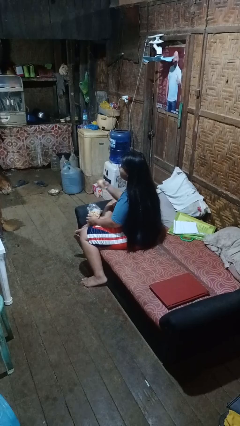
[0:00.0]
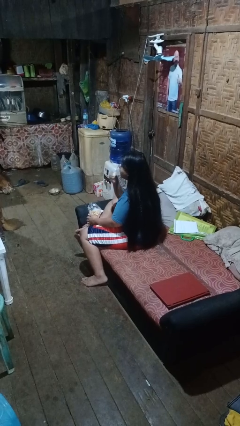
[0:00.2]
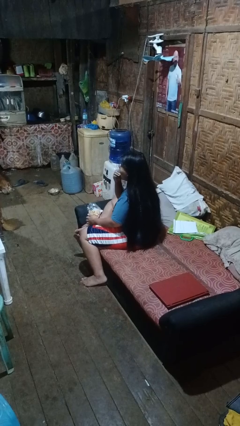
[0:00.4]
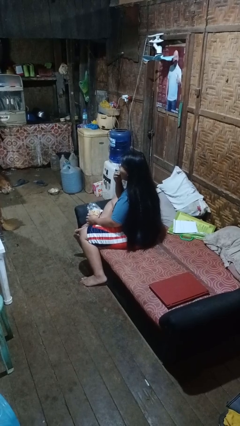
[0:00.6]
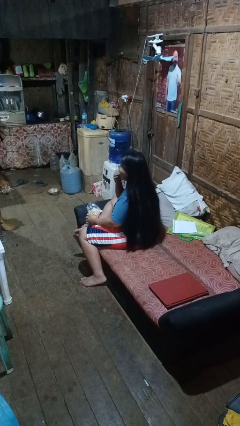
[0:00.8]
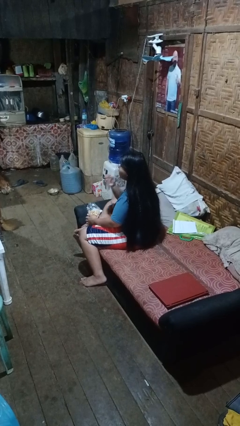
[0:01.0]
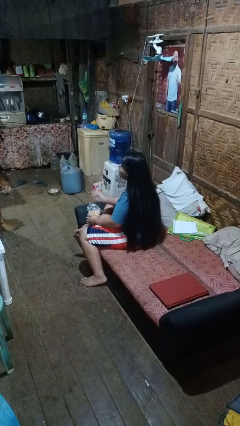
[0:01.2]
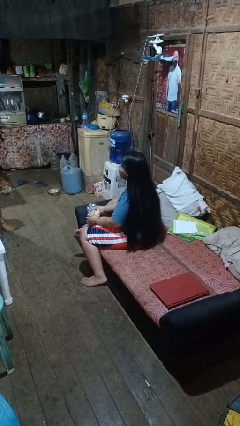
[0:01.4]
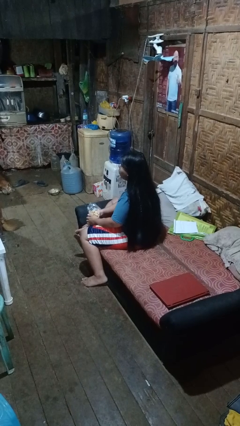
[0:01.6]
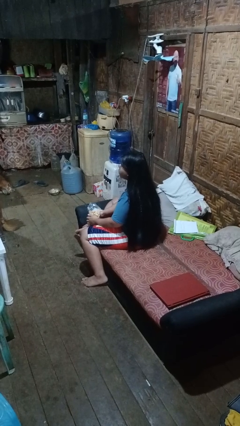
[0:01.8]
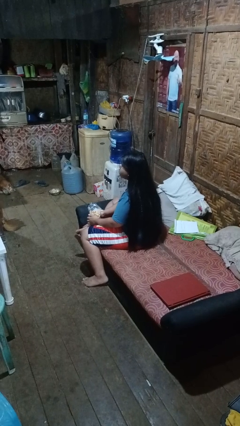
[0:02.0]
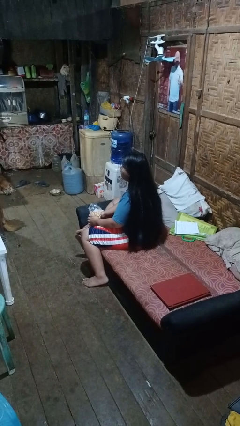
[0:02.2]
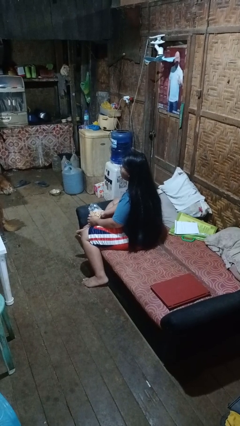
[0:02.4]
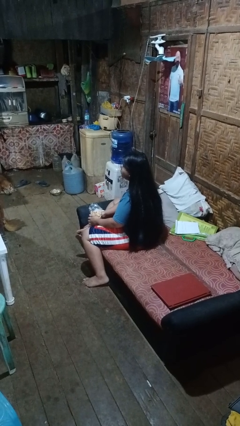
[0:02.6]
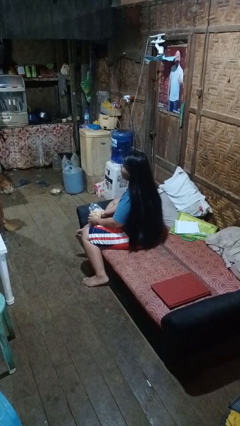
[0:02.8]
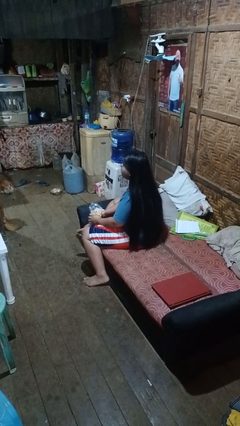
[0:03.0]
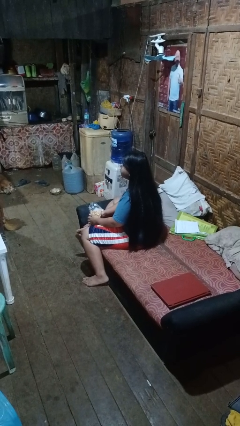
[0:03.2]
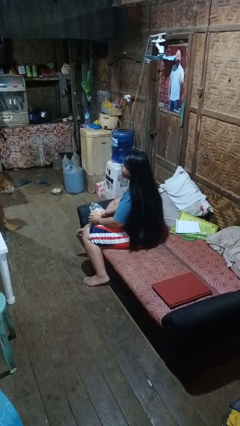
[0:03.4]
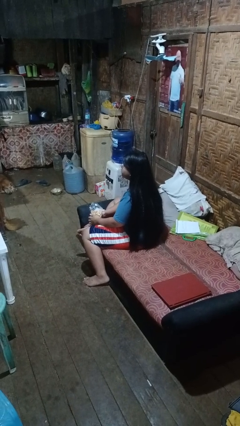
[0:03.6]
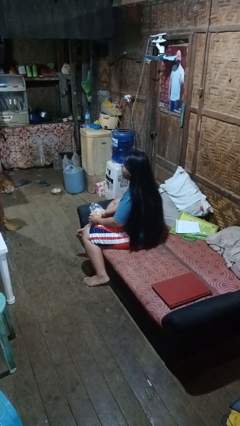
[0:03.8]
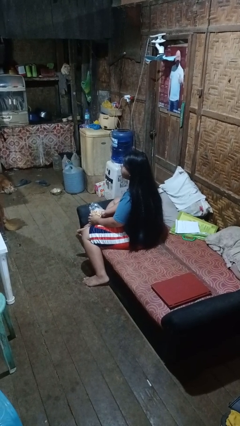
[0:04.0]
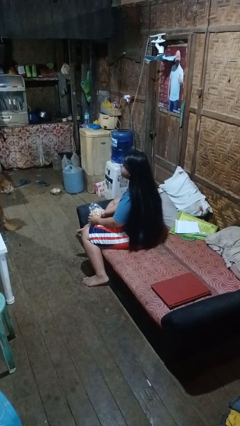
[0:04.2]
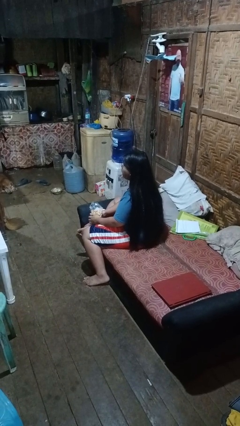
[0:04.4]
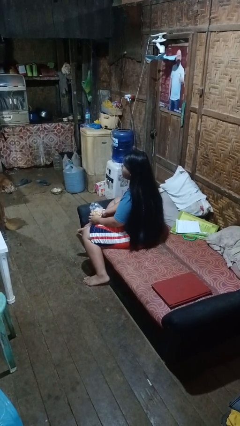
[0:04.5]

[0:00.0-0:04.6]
person eats snack from bag

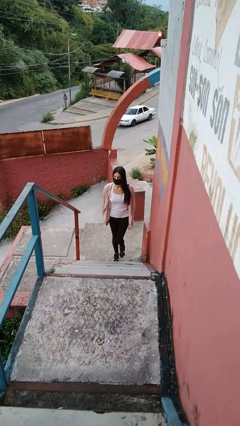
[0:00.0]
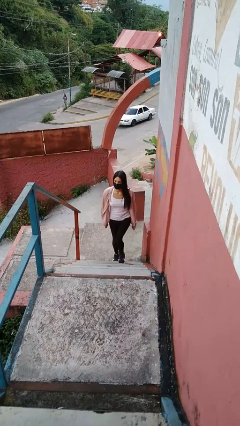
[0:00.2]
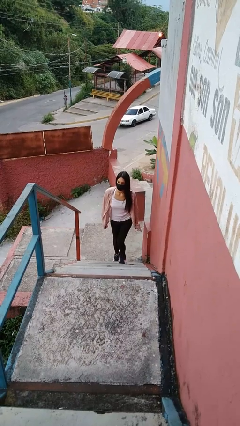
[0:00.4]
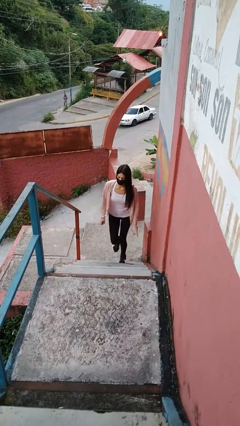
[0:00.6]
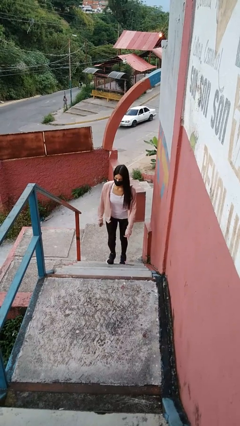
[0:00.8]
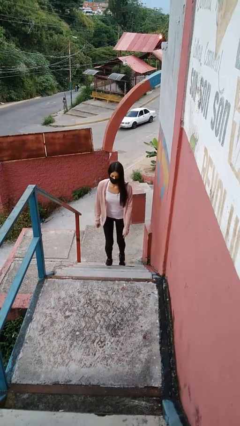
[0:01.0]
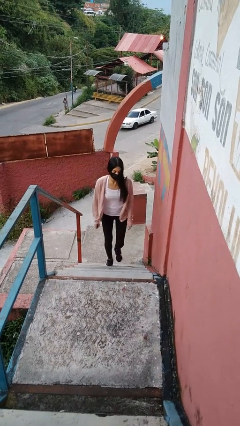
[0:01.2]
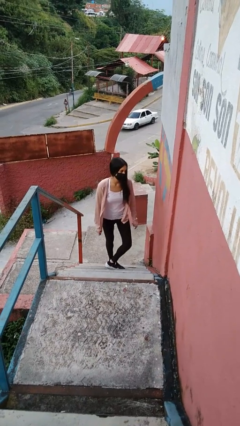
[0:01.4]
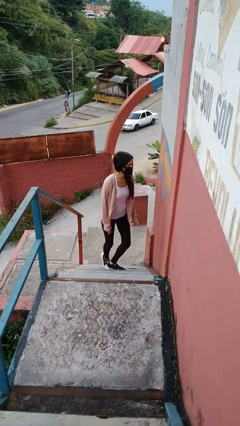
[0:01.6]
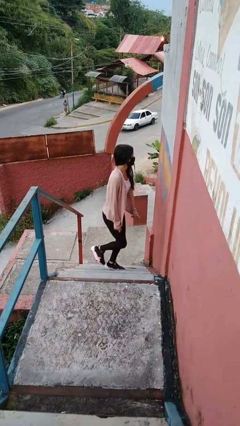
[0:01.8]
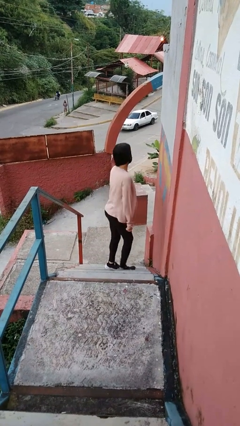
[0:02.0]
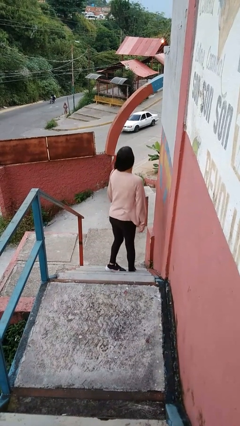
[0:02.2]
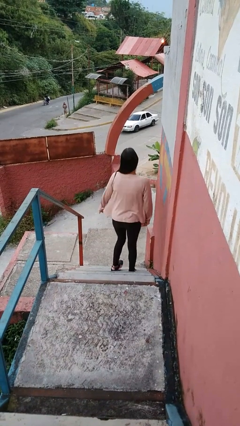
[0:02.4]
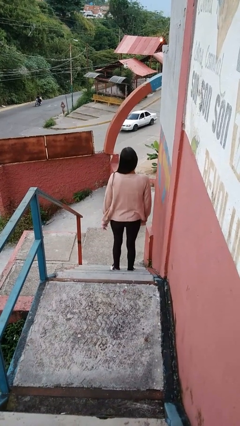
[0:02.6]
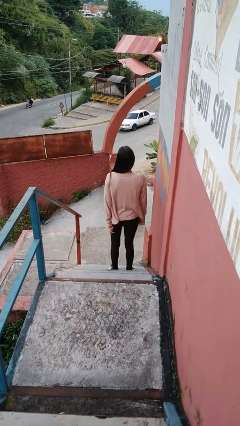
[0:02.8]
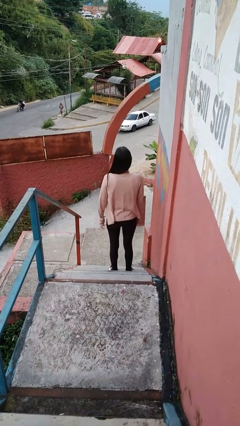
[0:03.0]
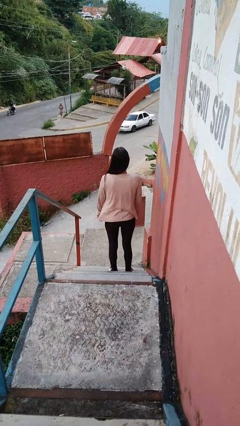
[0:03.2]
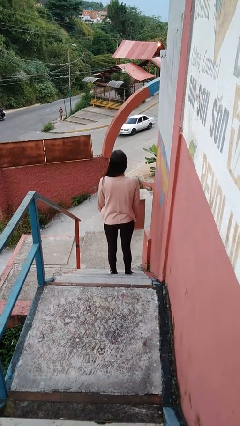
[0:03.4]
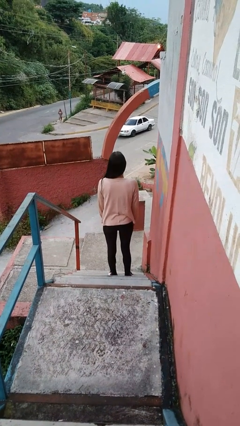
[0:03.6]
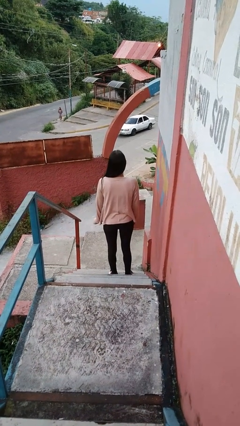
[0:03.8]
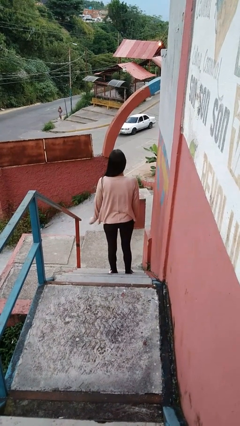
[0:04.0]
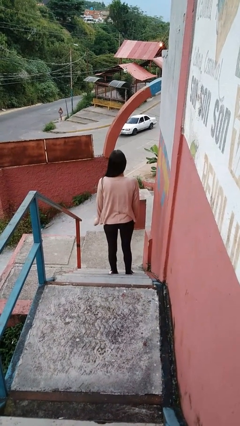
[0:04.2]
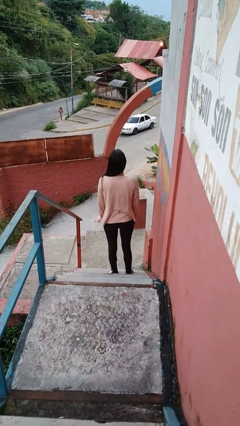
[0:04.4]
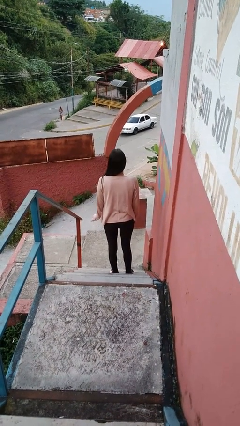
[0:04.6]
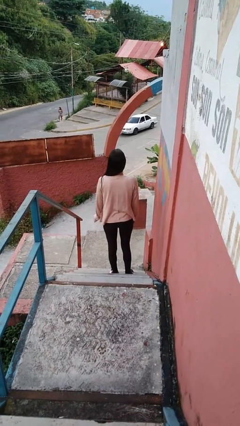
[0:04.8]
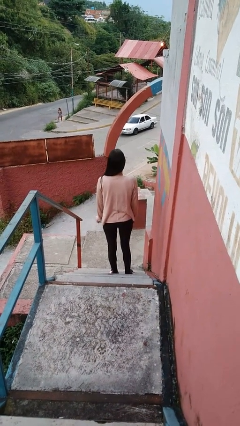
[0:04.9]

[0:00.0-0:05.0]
person climbs up stairs

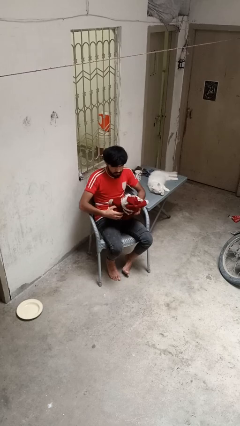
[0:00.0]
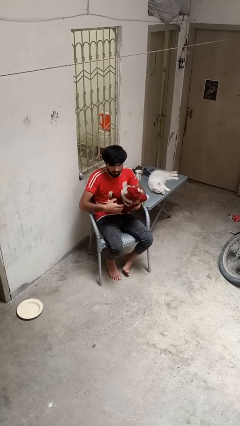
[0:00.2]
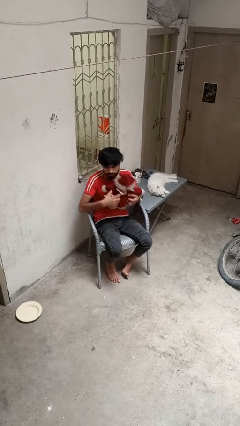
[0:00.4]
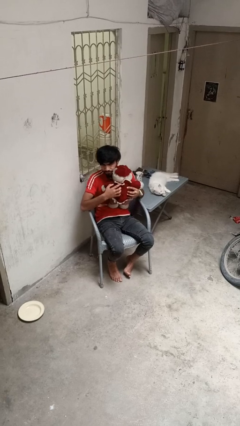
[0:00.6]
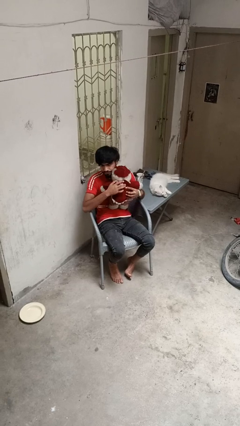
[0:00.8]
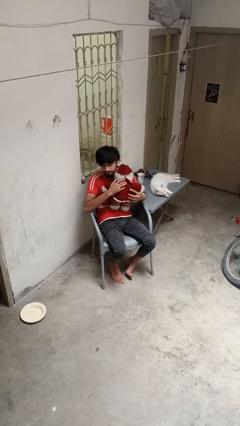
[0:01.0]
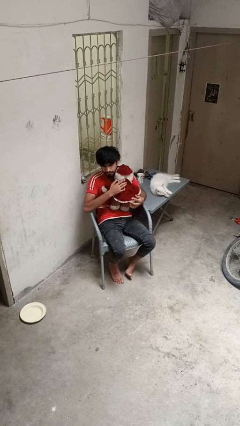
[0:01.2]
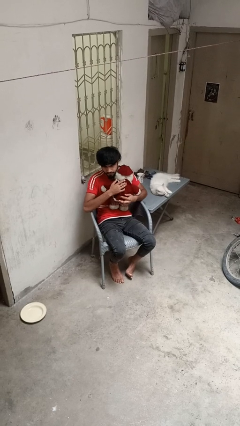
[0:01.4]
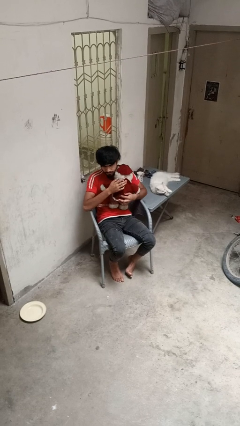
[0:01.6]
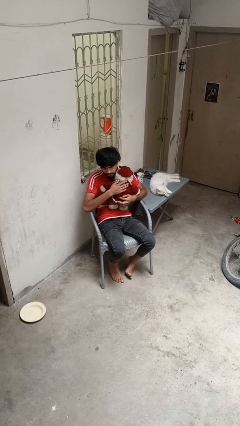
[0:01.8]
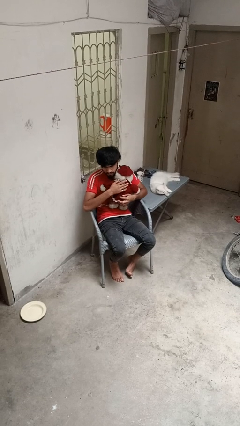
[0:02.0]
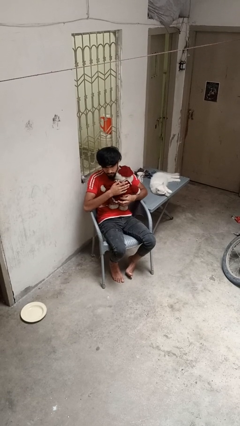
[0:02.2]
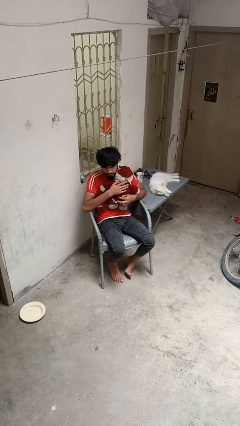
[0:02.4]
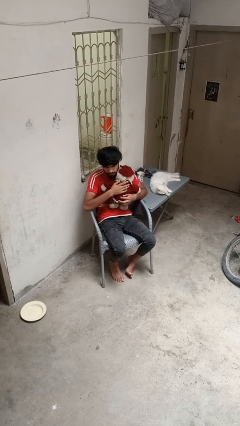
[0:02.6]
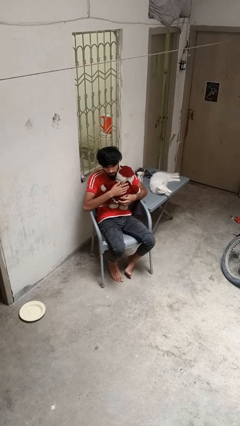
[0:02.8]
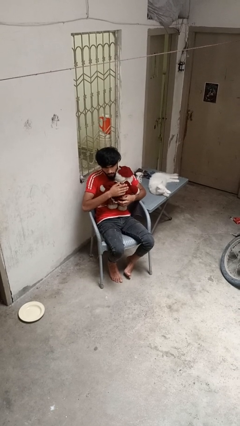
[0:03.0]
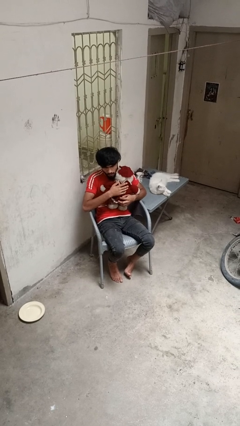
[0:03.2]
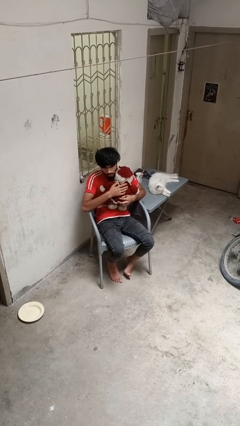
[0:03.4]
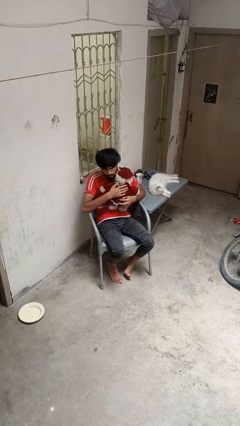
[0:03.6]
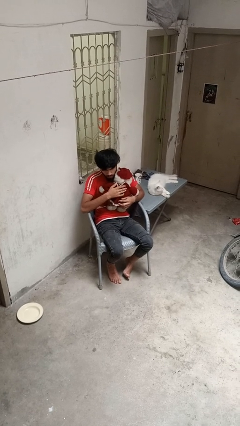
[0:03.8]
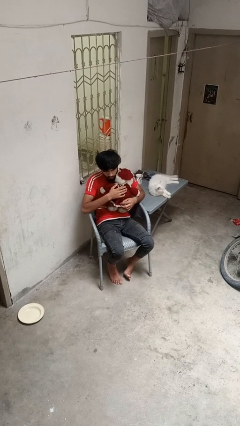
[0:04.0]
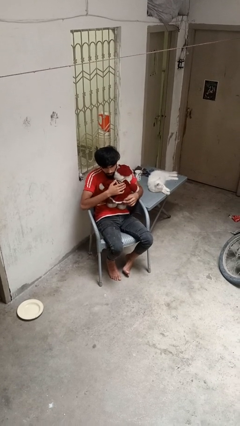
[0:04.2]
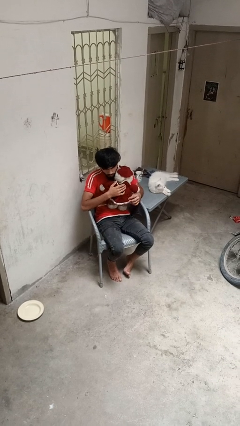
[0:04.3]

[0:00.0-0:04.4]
person hugs stuffed animal

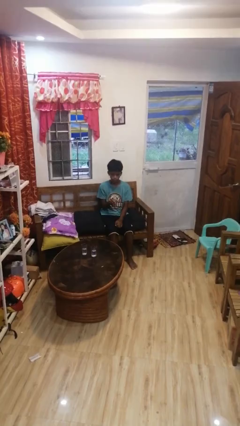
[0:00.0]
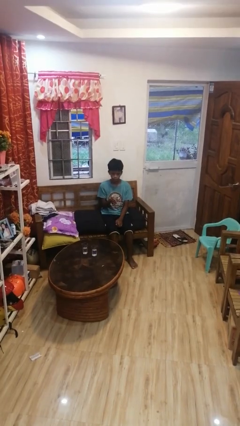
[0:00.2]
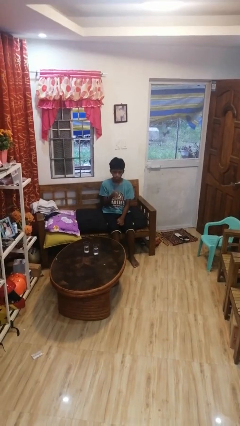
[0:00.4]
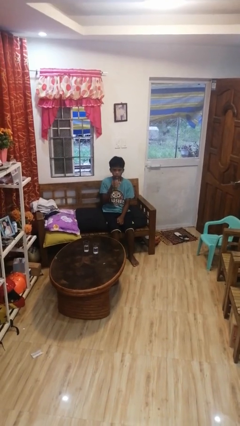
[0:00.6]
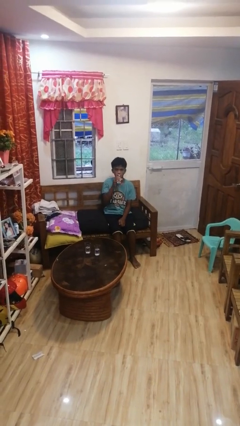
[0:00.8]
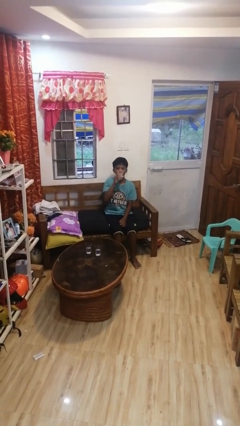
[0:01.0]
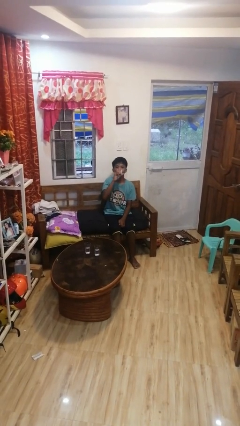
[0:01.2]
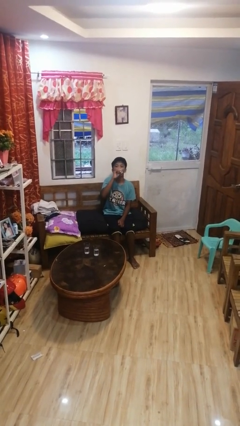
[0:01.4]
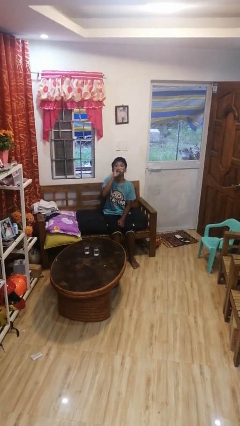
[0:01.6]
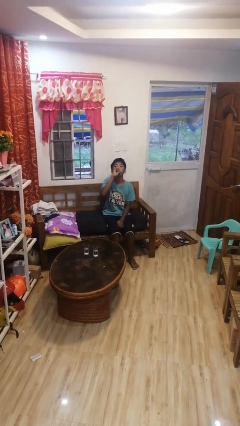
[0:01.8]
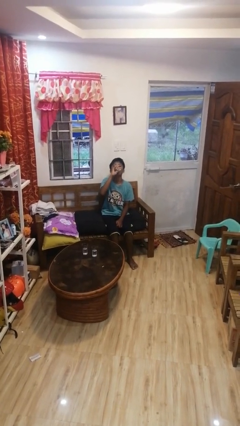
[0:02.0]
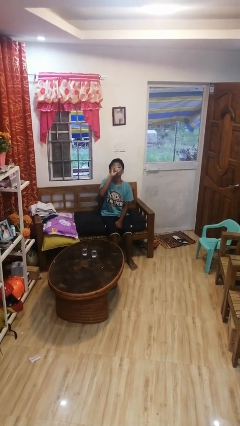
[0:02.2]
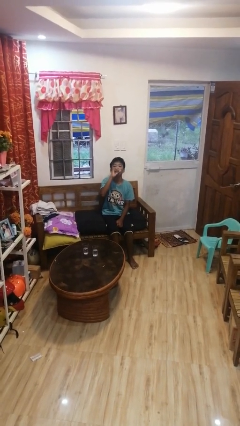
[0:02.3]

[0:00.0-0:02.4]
person drinks from shotglass

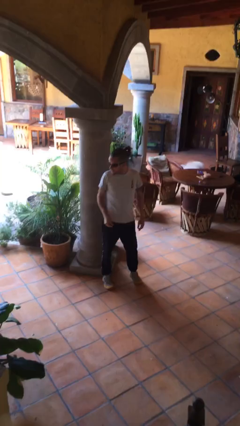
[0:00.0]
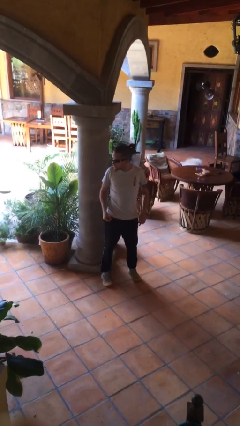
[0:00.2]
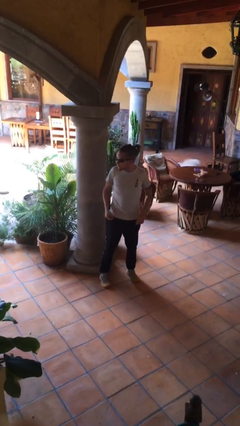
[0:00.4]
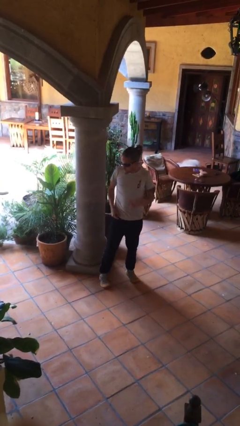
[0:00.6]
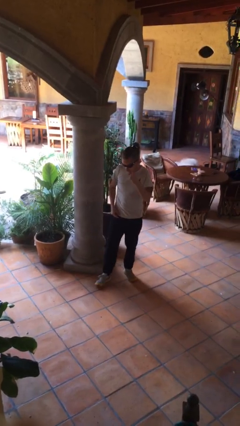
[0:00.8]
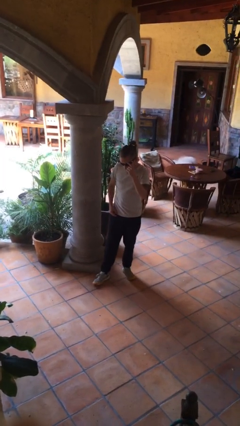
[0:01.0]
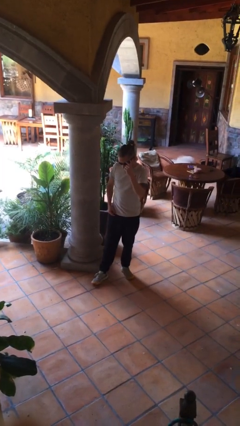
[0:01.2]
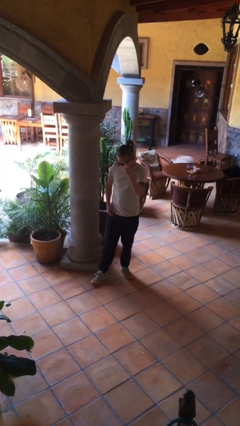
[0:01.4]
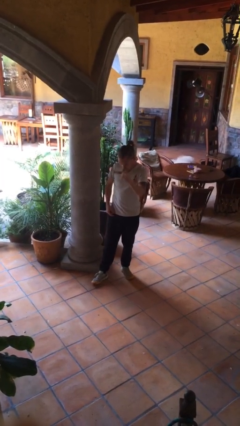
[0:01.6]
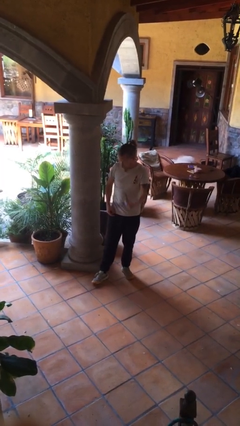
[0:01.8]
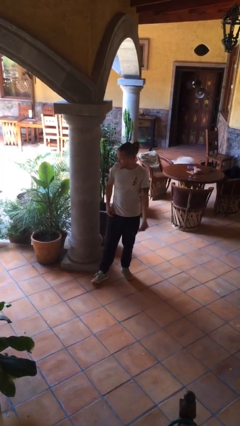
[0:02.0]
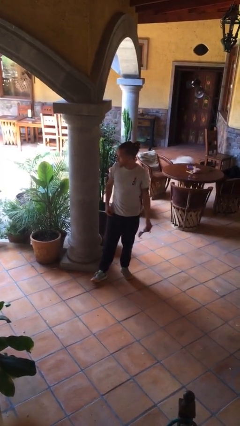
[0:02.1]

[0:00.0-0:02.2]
person takes off sunglasses
